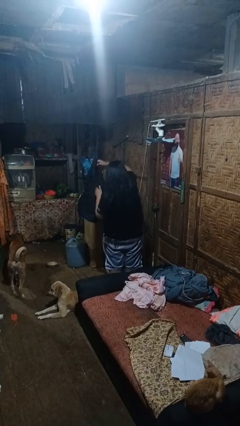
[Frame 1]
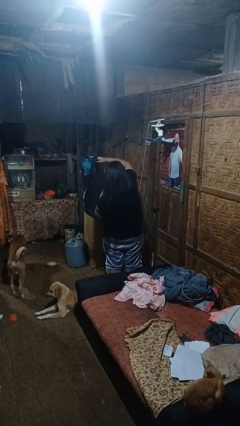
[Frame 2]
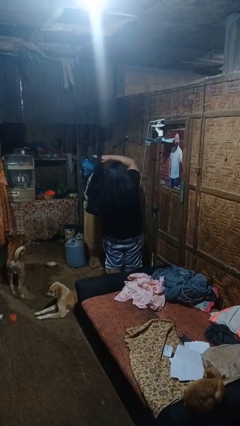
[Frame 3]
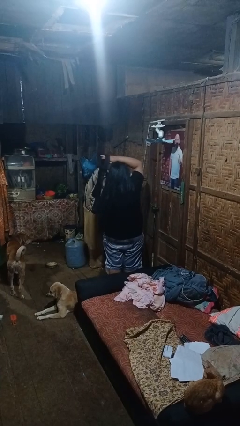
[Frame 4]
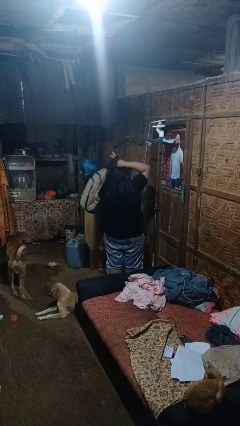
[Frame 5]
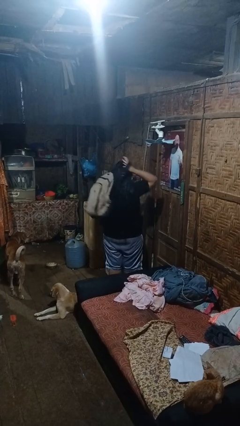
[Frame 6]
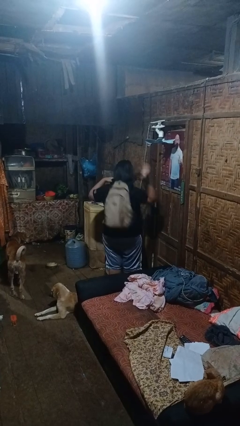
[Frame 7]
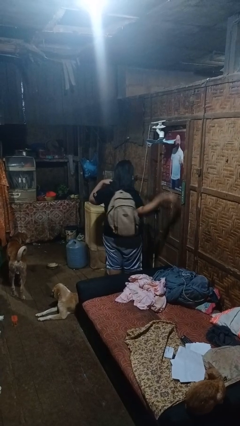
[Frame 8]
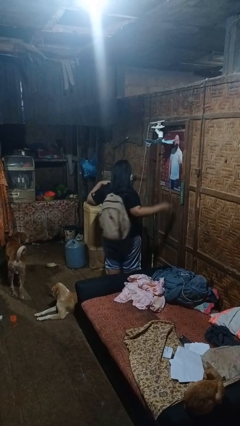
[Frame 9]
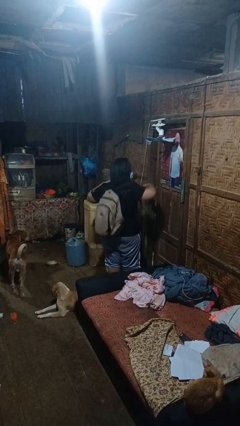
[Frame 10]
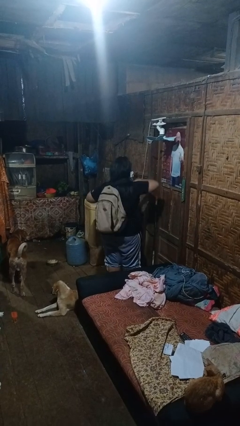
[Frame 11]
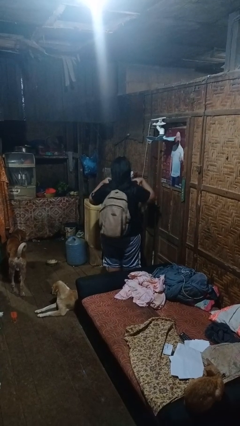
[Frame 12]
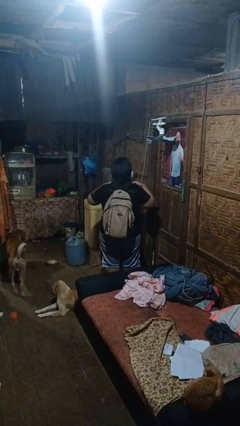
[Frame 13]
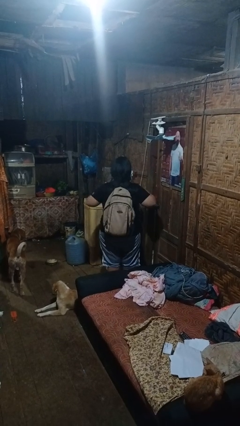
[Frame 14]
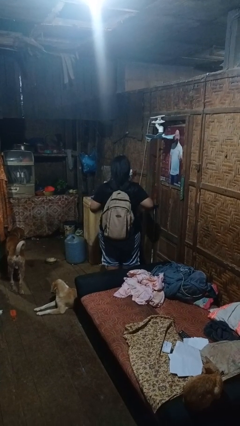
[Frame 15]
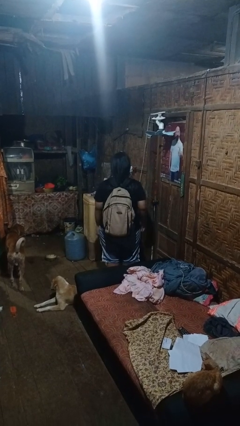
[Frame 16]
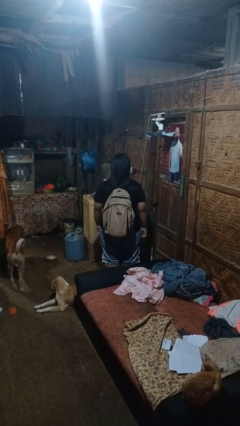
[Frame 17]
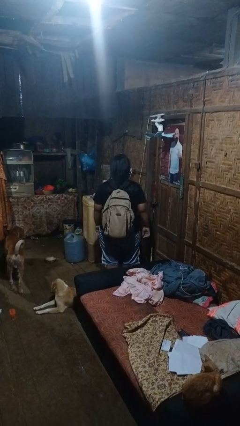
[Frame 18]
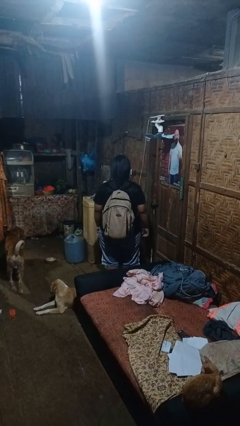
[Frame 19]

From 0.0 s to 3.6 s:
person puts on backpack

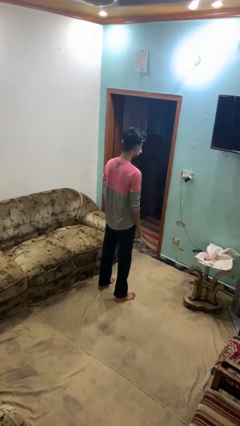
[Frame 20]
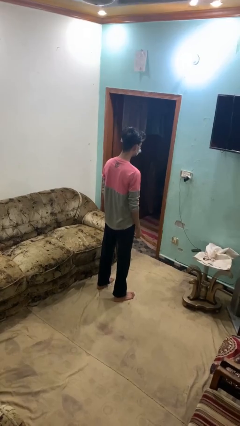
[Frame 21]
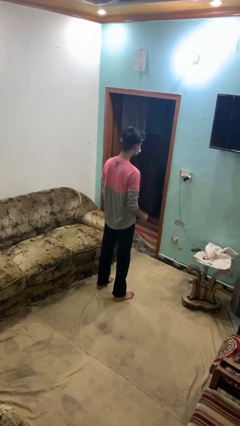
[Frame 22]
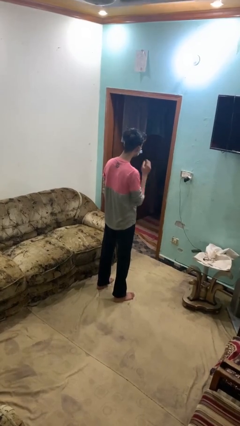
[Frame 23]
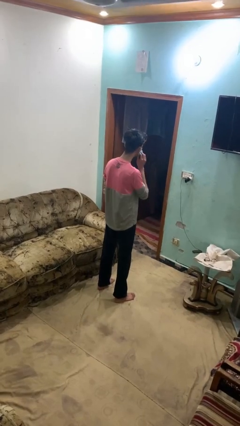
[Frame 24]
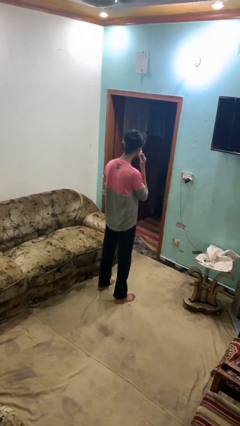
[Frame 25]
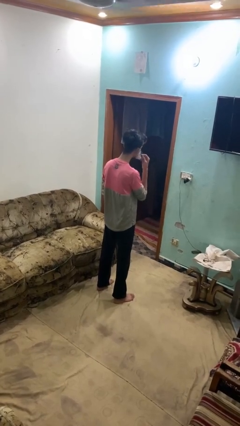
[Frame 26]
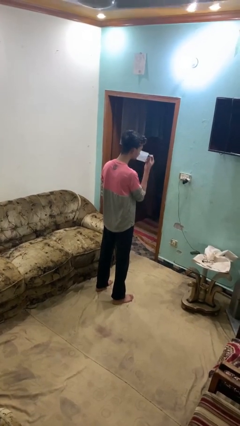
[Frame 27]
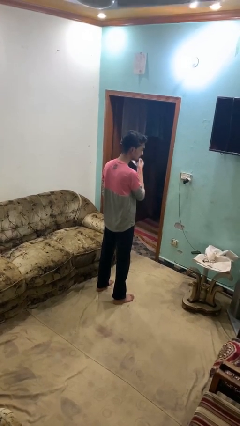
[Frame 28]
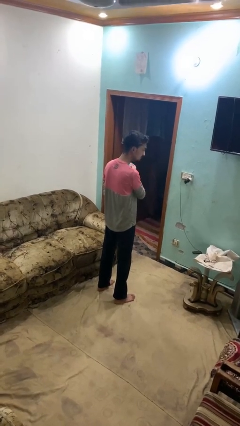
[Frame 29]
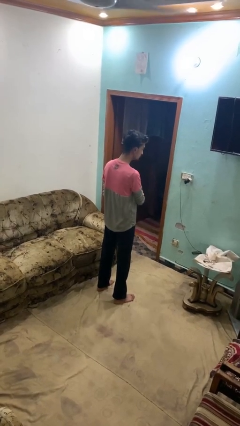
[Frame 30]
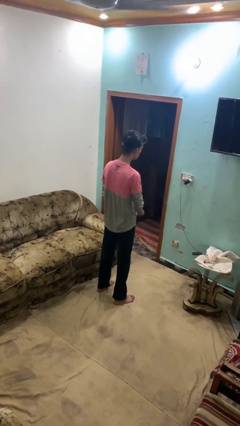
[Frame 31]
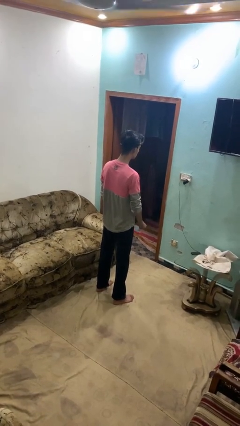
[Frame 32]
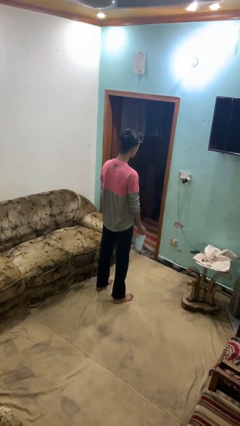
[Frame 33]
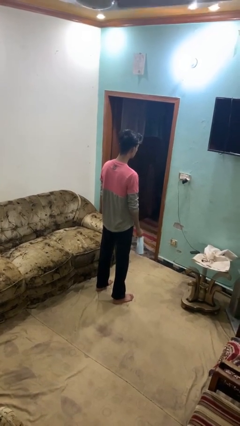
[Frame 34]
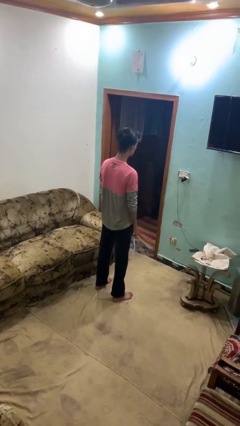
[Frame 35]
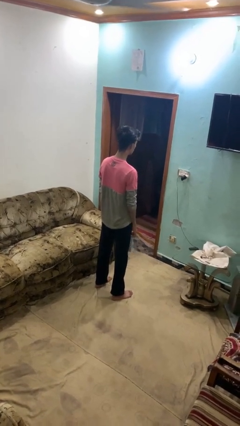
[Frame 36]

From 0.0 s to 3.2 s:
person takes off facemask

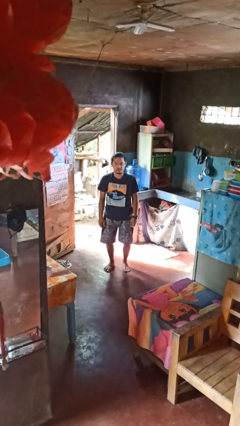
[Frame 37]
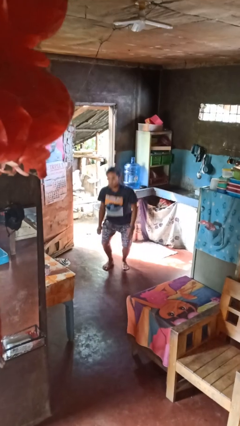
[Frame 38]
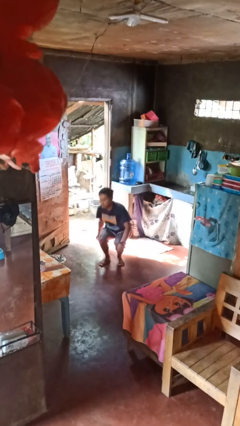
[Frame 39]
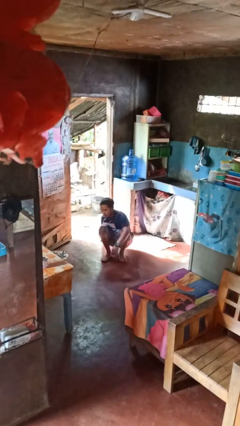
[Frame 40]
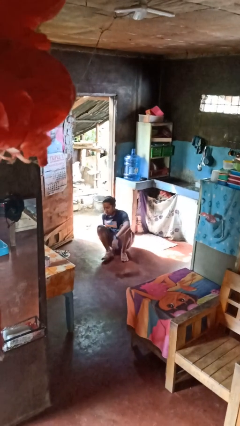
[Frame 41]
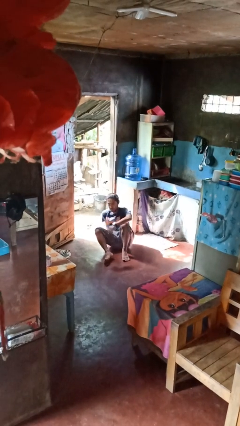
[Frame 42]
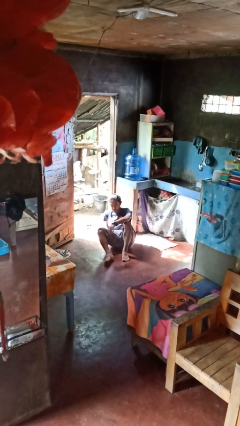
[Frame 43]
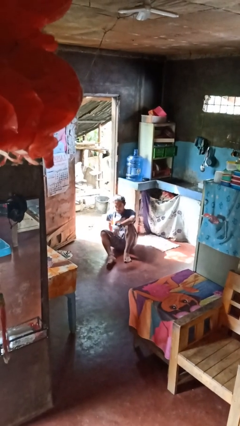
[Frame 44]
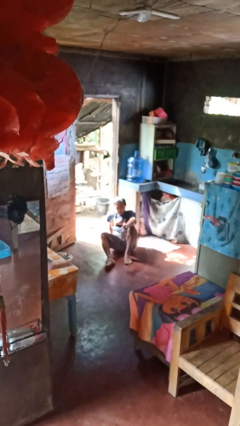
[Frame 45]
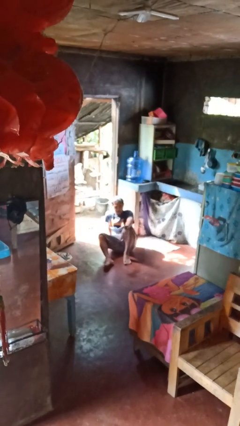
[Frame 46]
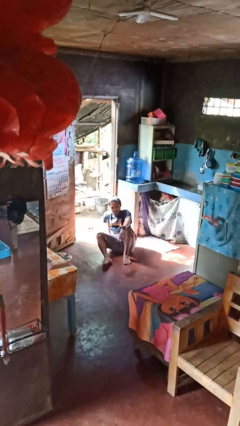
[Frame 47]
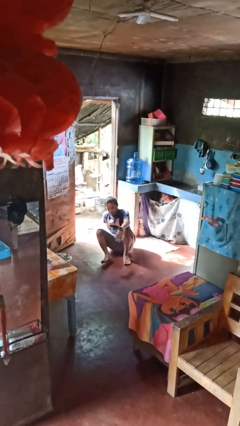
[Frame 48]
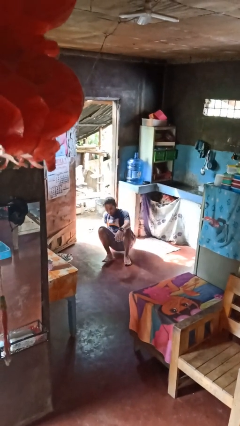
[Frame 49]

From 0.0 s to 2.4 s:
person falls while standing

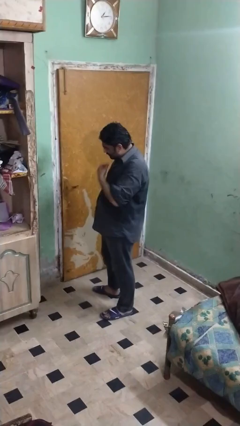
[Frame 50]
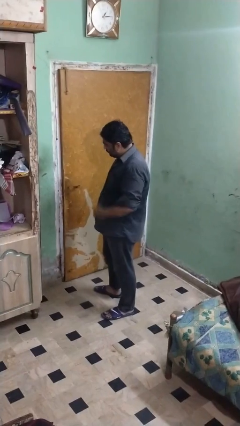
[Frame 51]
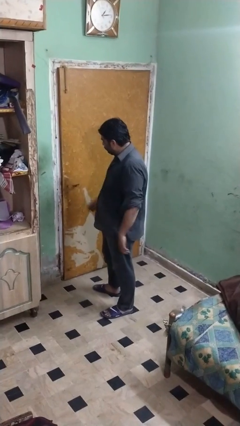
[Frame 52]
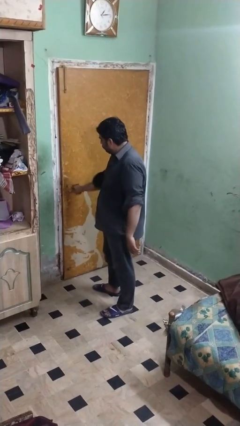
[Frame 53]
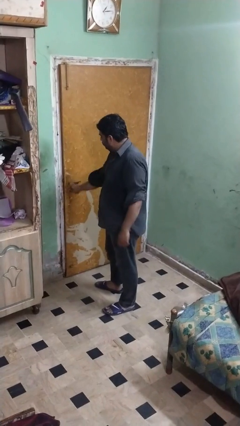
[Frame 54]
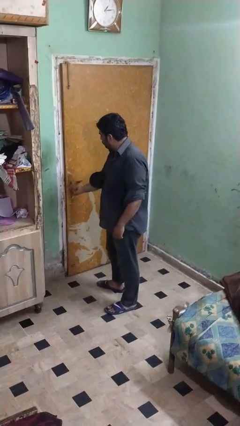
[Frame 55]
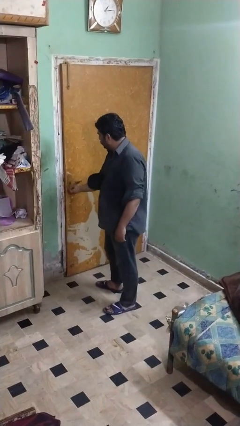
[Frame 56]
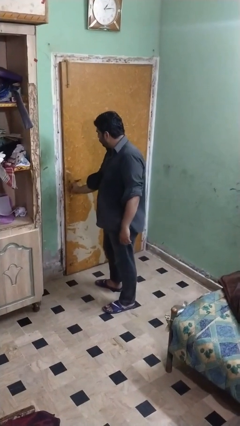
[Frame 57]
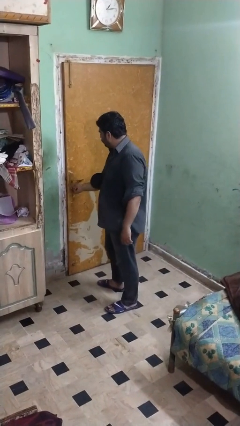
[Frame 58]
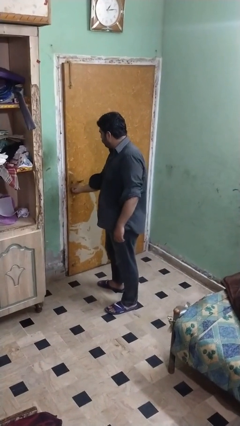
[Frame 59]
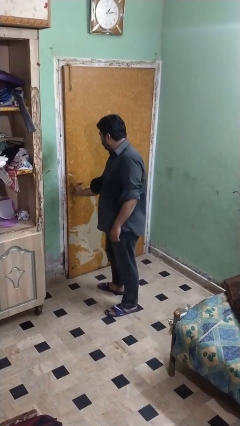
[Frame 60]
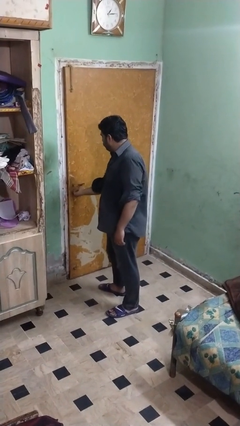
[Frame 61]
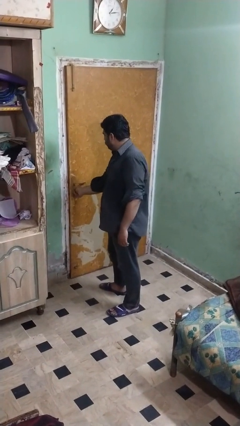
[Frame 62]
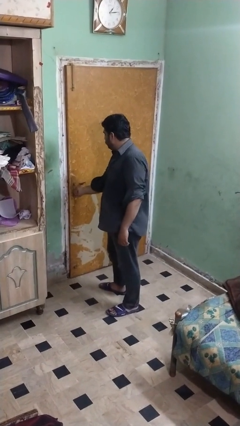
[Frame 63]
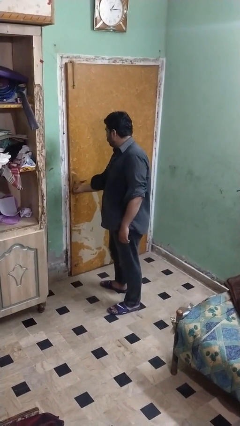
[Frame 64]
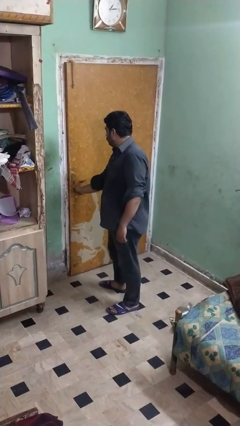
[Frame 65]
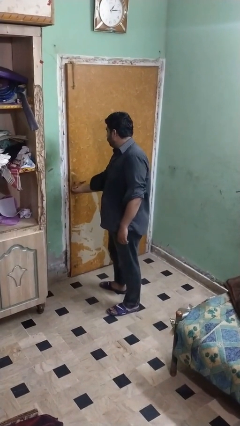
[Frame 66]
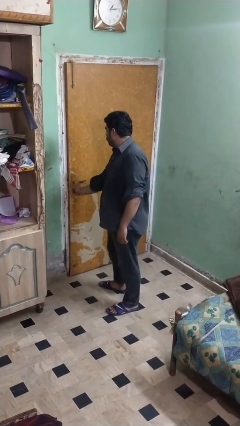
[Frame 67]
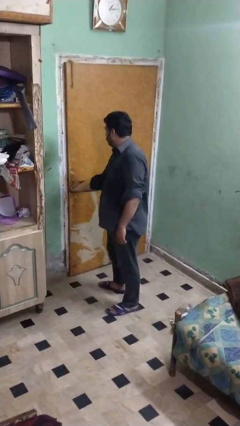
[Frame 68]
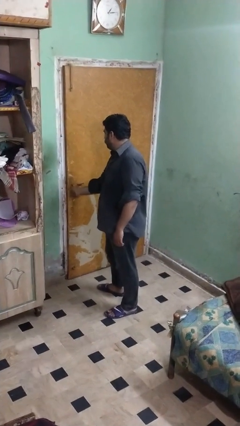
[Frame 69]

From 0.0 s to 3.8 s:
person unlocks door with keys

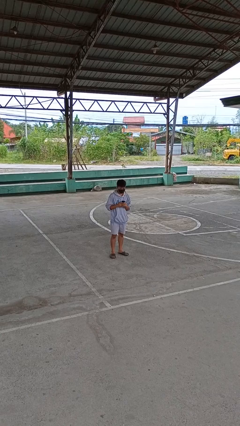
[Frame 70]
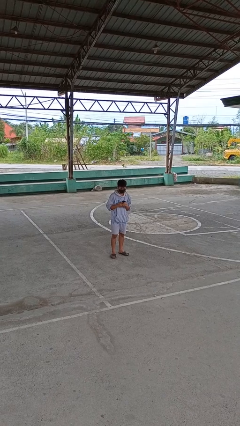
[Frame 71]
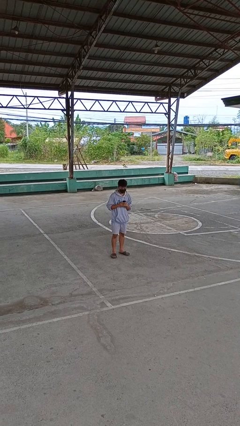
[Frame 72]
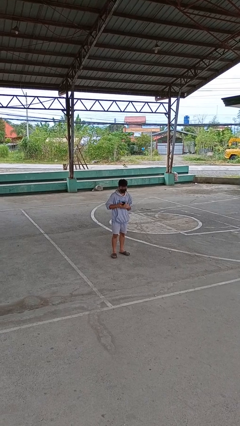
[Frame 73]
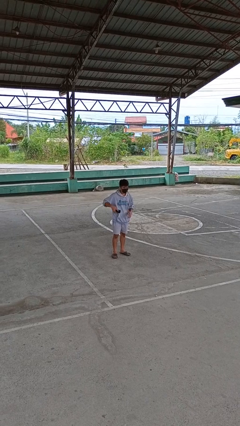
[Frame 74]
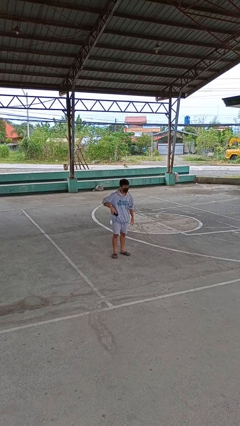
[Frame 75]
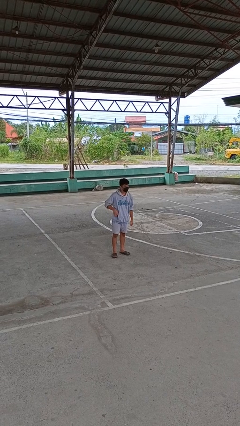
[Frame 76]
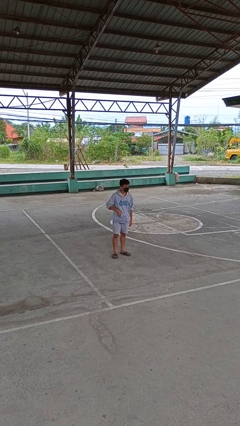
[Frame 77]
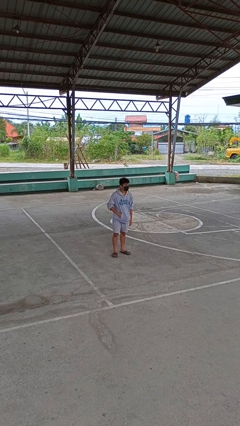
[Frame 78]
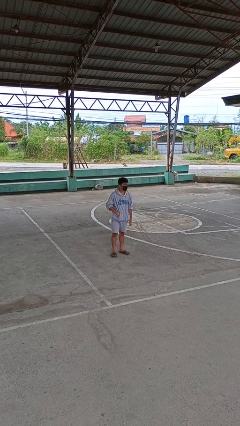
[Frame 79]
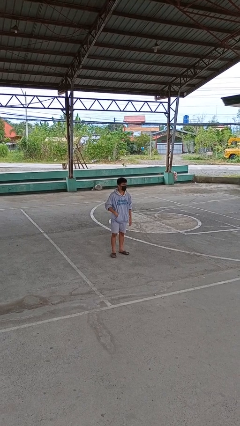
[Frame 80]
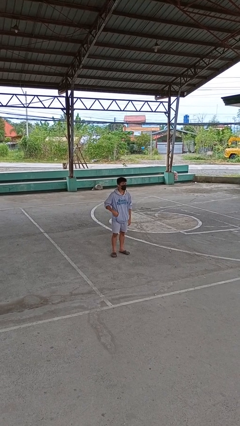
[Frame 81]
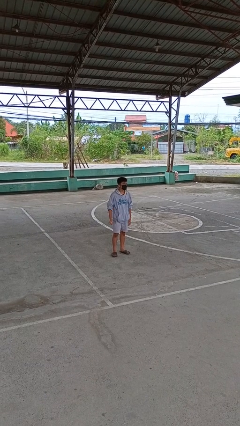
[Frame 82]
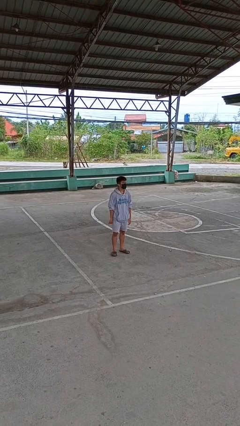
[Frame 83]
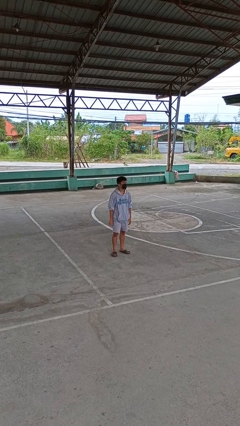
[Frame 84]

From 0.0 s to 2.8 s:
person puts phone into pocket

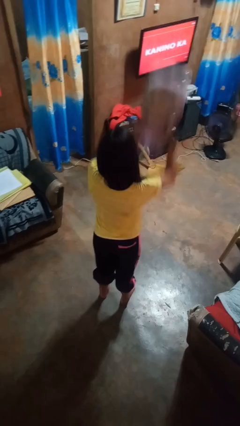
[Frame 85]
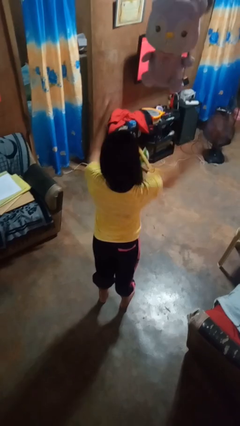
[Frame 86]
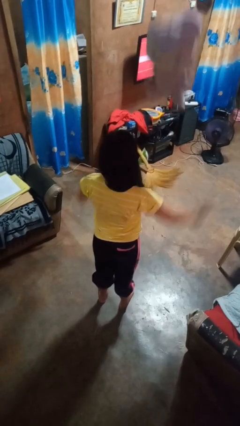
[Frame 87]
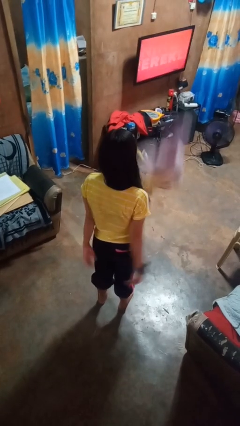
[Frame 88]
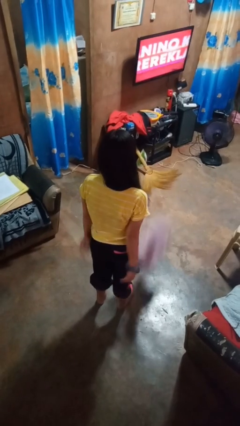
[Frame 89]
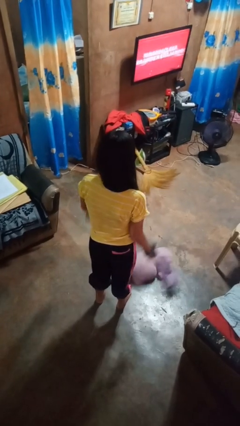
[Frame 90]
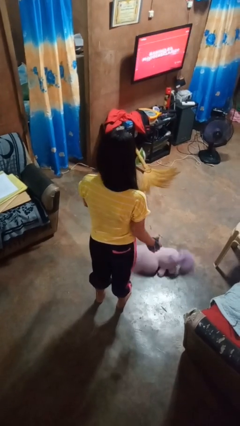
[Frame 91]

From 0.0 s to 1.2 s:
person throws object into air
